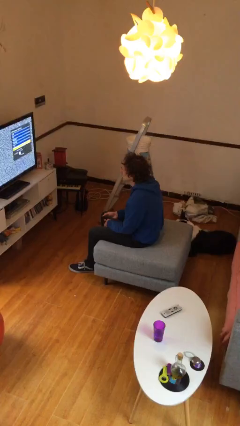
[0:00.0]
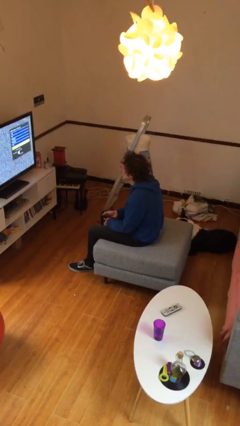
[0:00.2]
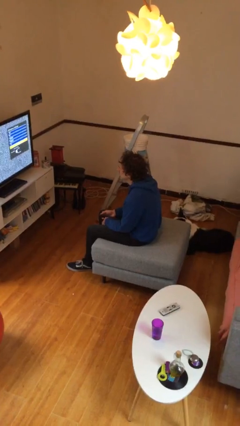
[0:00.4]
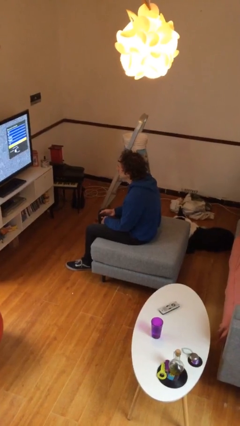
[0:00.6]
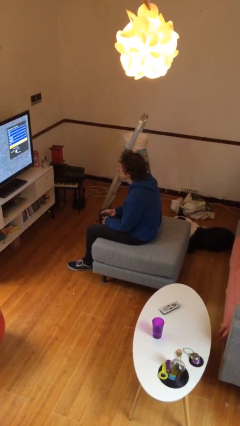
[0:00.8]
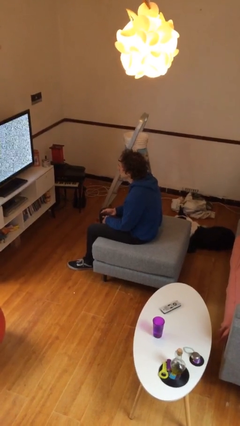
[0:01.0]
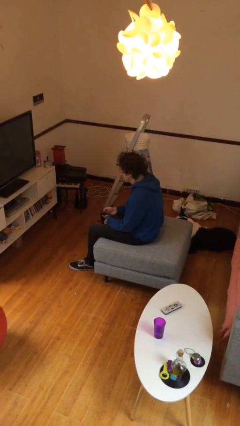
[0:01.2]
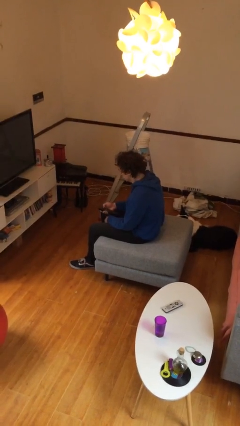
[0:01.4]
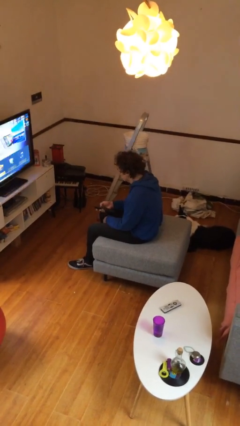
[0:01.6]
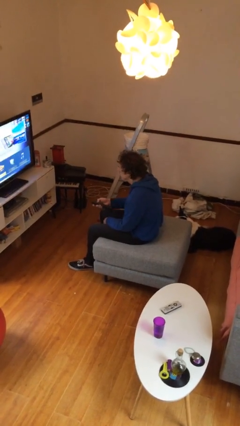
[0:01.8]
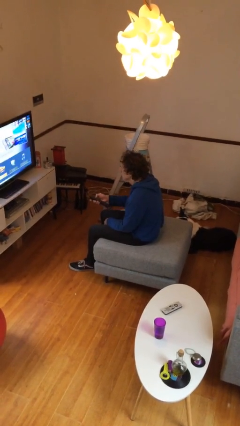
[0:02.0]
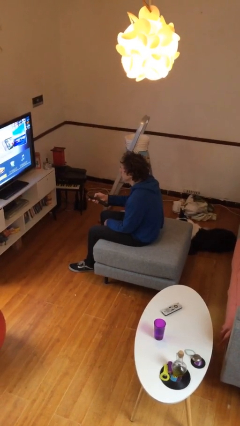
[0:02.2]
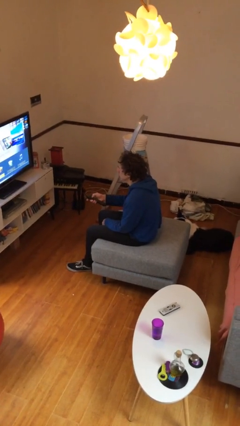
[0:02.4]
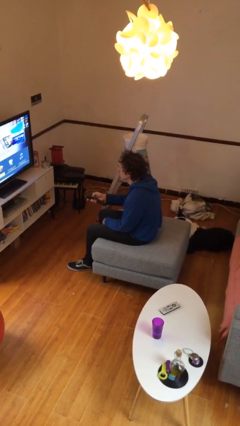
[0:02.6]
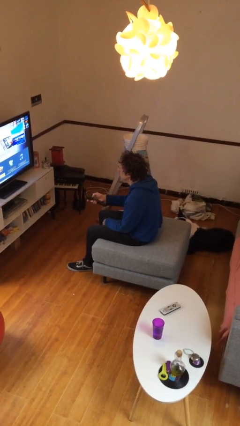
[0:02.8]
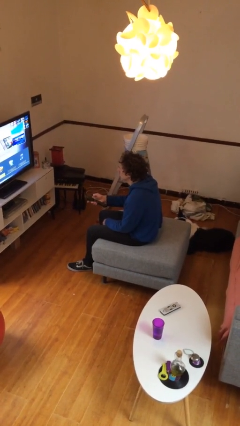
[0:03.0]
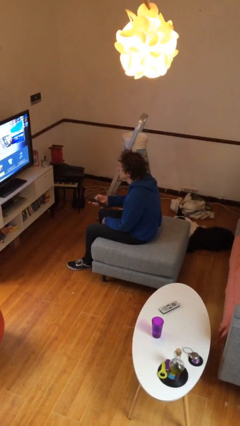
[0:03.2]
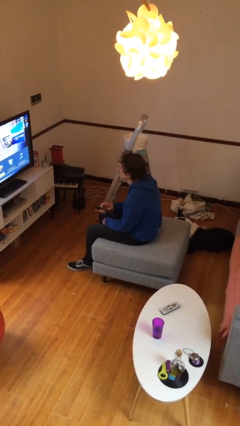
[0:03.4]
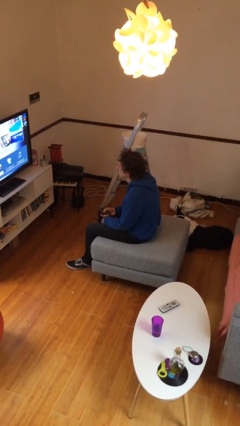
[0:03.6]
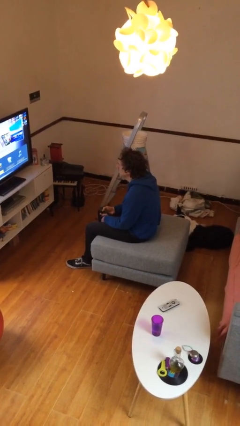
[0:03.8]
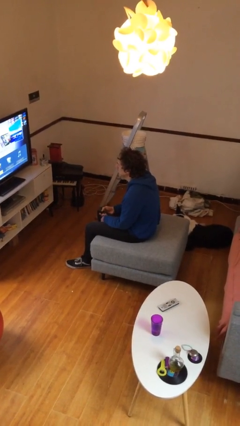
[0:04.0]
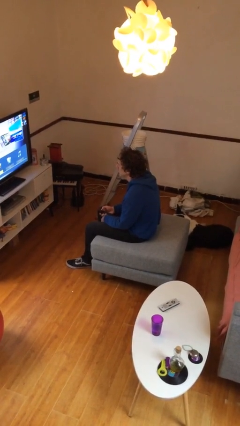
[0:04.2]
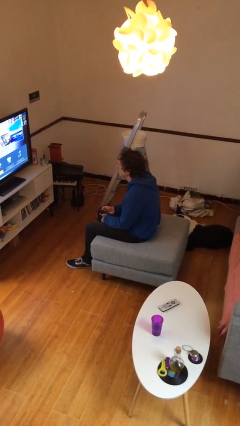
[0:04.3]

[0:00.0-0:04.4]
person uses television remote

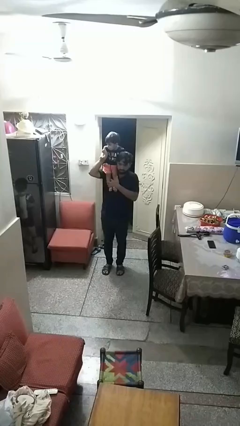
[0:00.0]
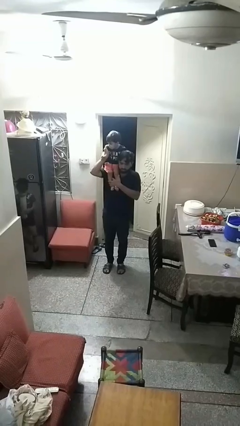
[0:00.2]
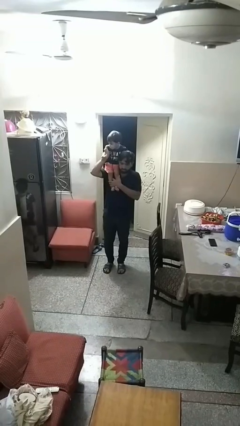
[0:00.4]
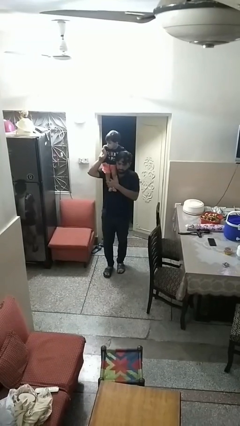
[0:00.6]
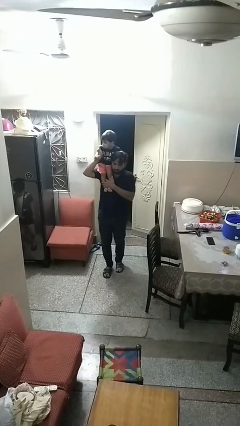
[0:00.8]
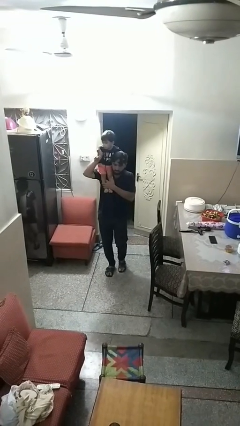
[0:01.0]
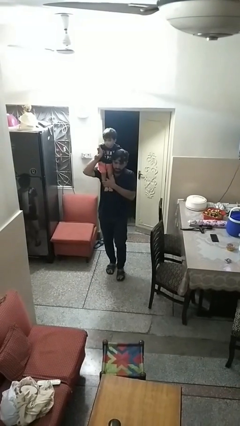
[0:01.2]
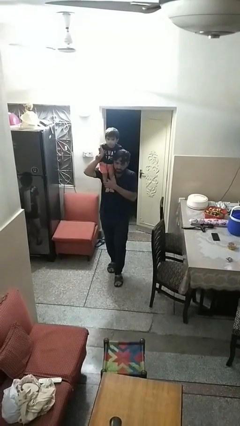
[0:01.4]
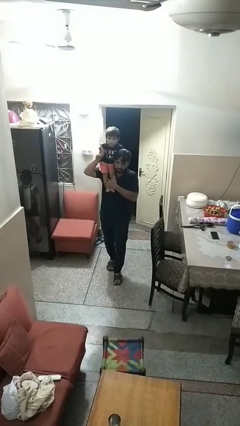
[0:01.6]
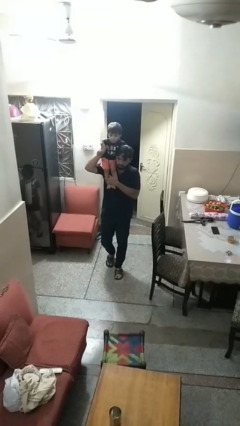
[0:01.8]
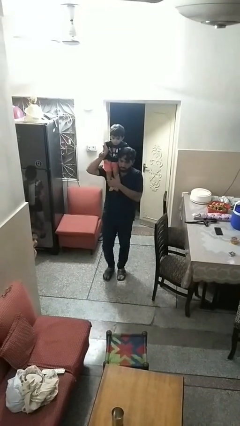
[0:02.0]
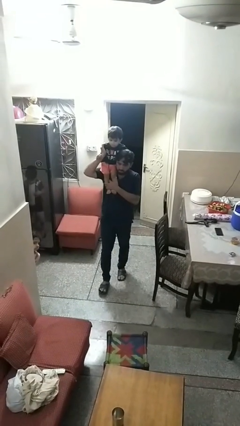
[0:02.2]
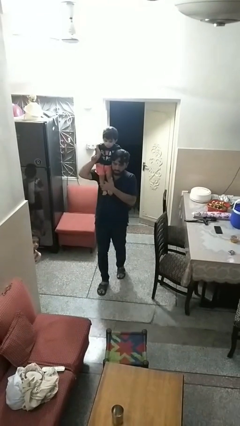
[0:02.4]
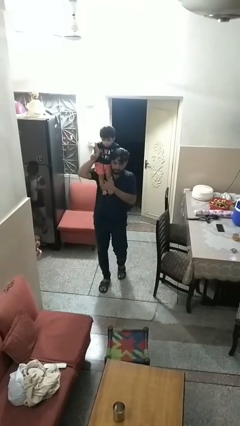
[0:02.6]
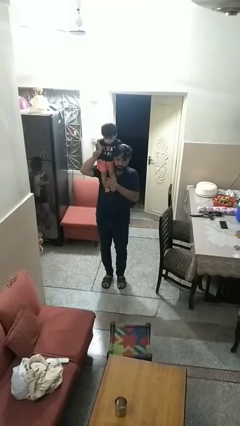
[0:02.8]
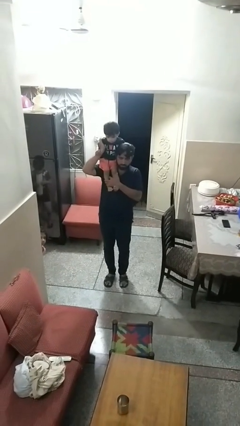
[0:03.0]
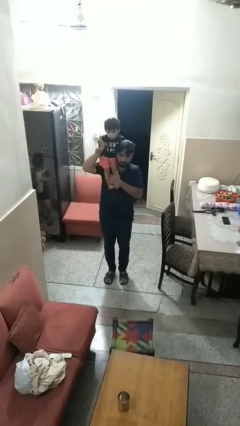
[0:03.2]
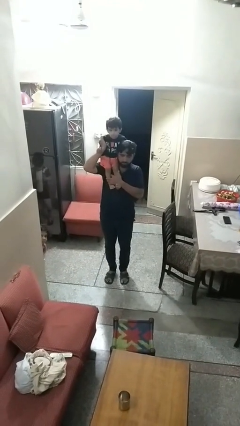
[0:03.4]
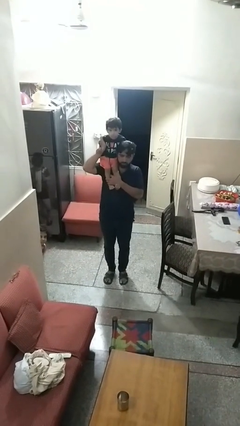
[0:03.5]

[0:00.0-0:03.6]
person carries person on shoulders

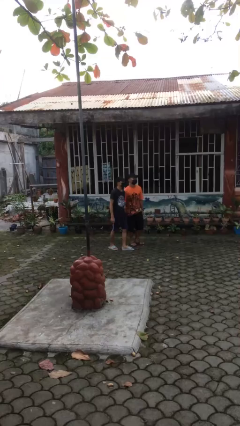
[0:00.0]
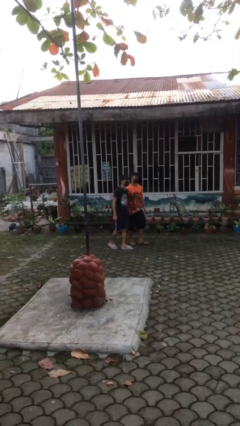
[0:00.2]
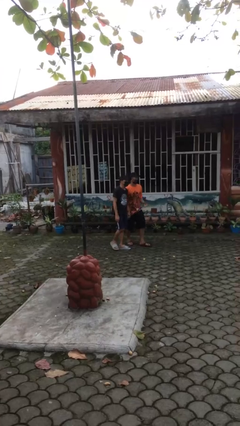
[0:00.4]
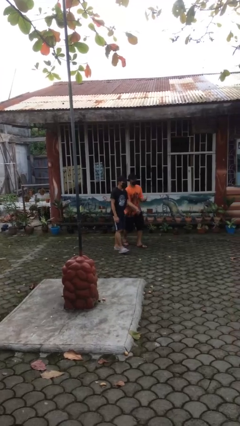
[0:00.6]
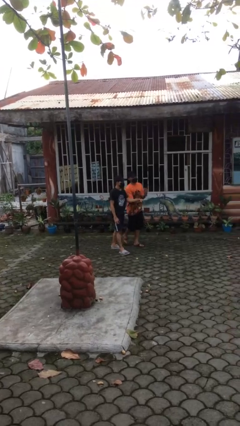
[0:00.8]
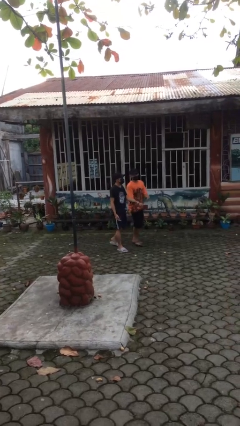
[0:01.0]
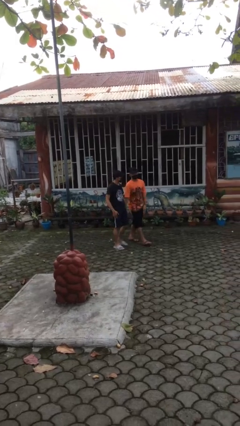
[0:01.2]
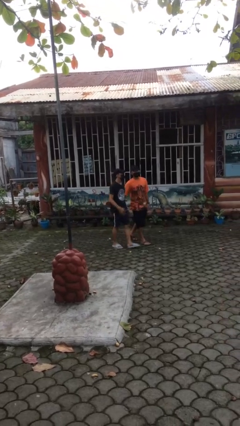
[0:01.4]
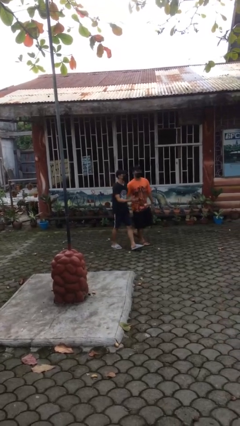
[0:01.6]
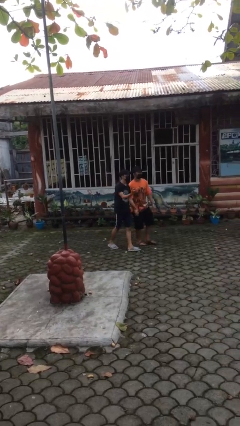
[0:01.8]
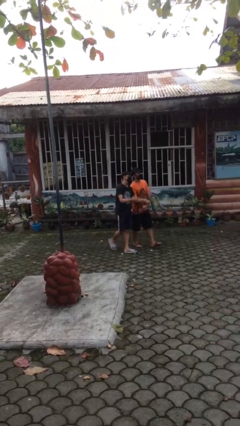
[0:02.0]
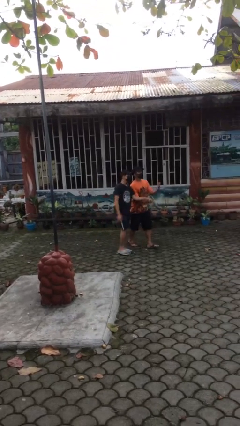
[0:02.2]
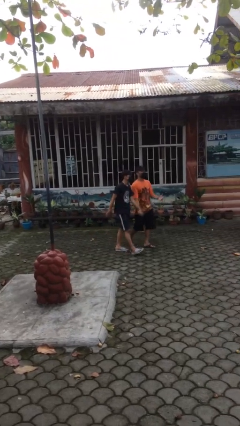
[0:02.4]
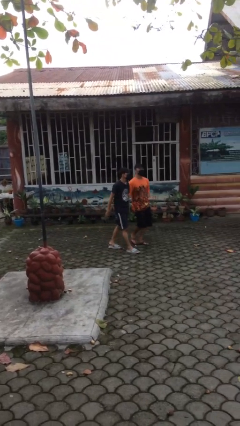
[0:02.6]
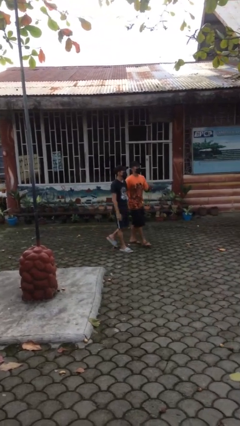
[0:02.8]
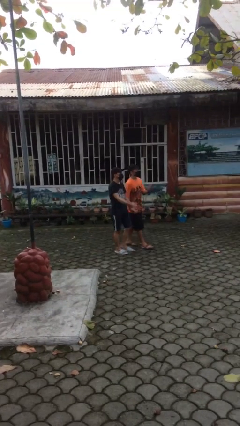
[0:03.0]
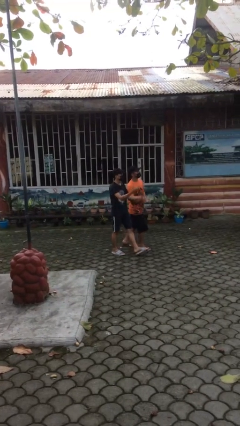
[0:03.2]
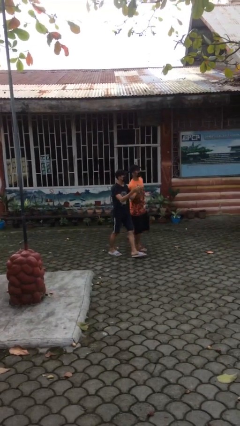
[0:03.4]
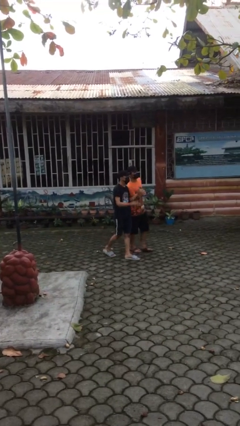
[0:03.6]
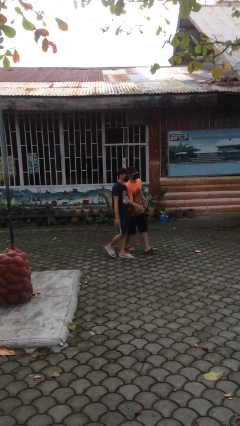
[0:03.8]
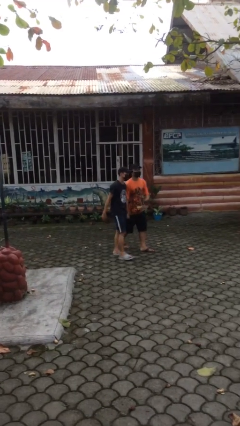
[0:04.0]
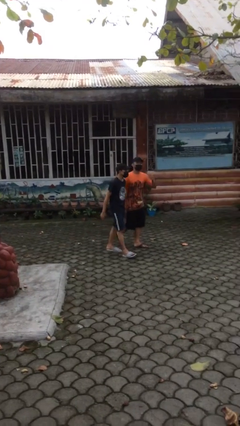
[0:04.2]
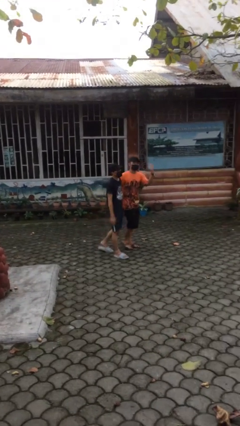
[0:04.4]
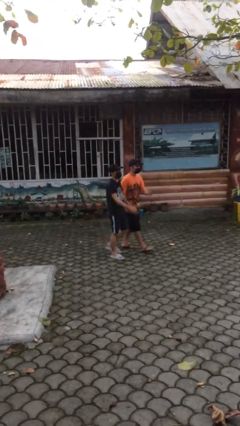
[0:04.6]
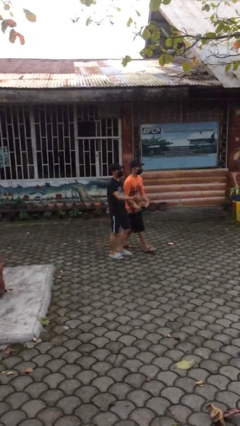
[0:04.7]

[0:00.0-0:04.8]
person holds hand

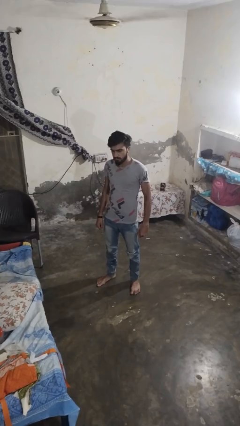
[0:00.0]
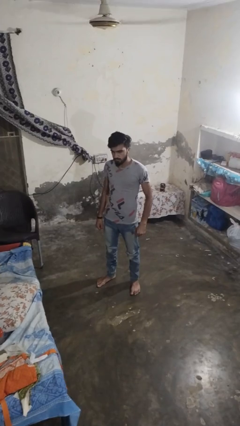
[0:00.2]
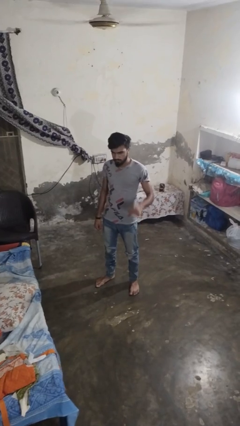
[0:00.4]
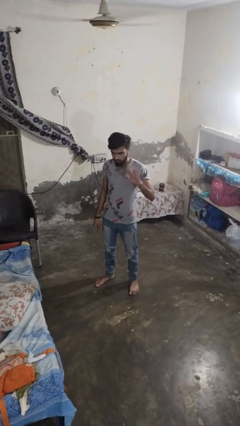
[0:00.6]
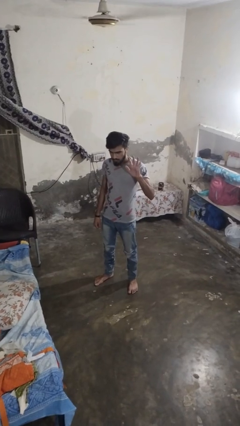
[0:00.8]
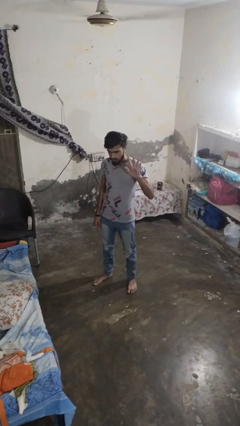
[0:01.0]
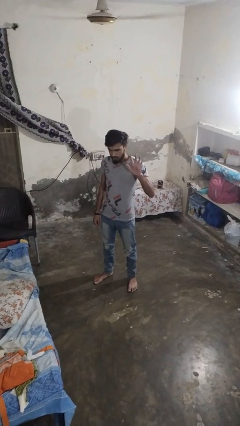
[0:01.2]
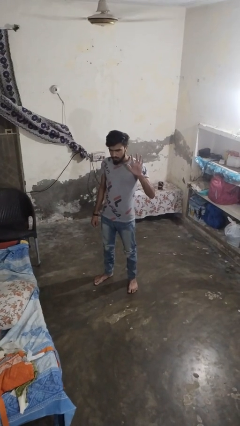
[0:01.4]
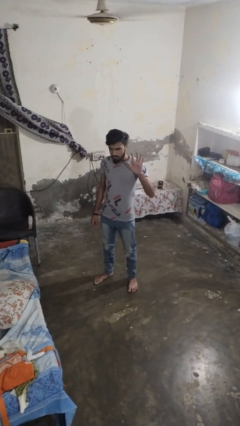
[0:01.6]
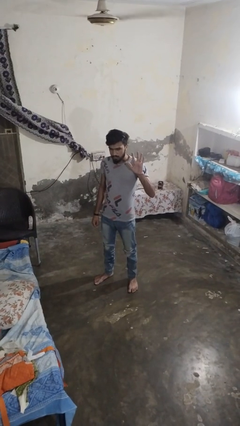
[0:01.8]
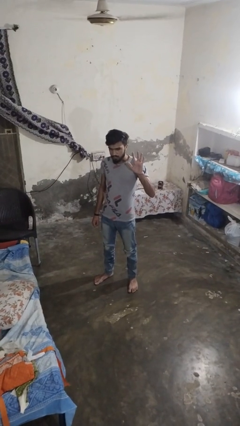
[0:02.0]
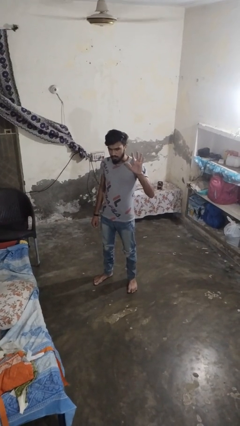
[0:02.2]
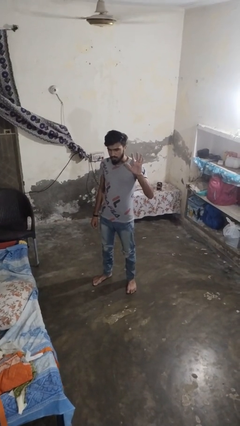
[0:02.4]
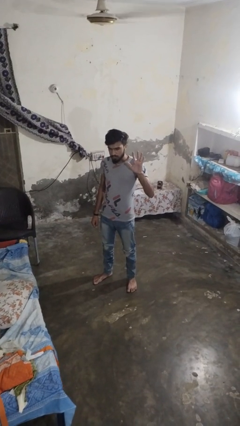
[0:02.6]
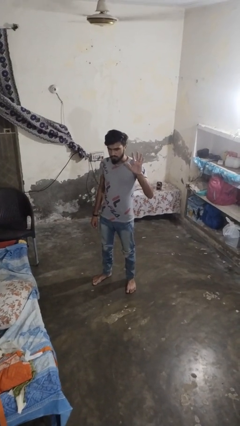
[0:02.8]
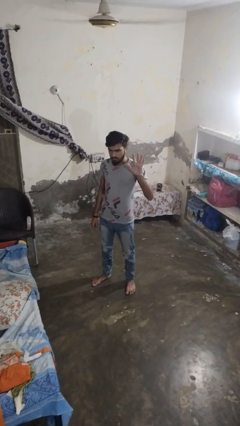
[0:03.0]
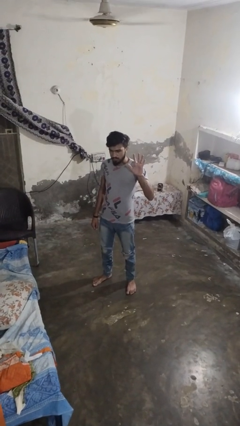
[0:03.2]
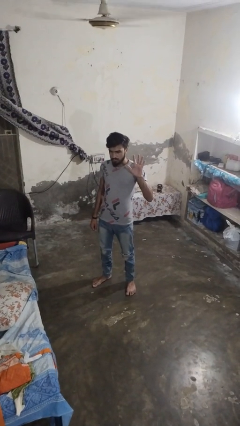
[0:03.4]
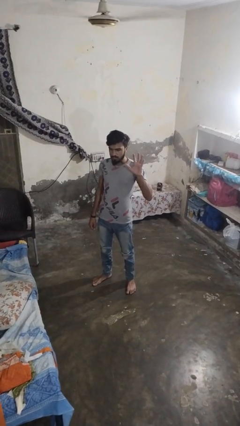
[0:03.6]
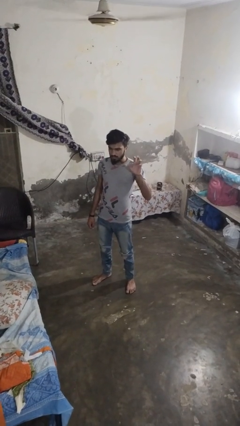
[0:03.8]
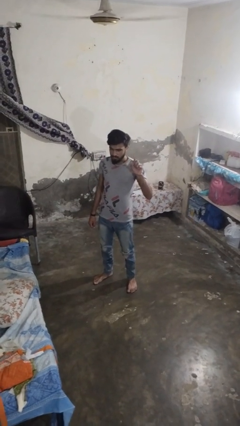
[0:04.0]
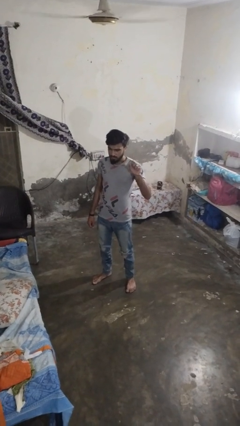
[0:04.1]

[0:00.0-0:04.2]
person gestures number five

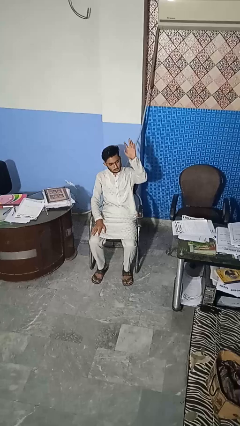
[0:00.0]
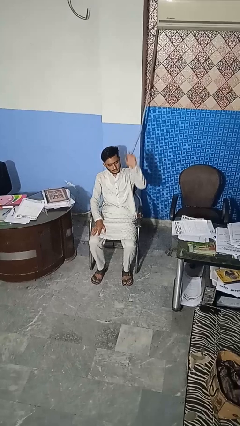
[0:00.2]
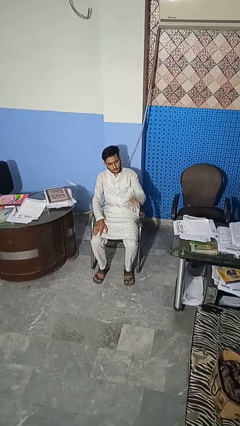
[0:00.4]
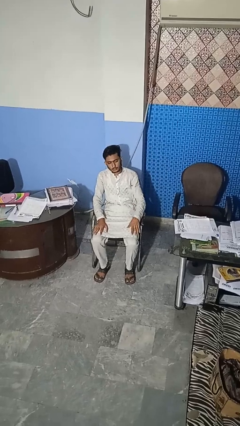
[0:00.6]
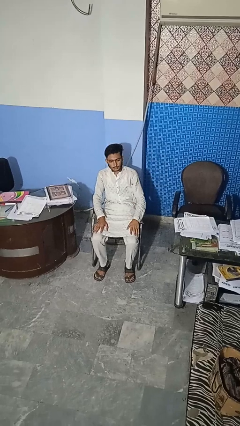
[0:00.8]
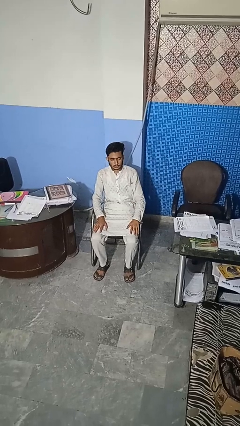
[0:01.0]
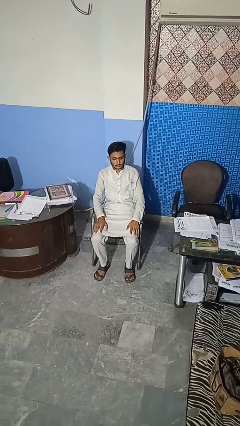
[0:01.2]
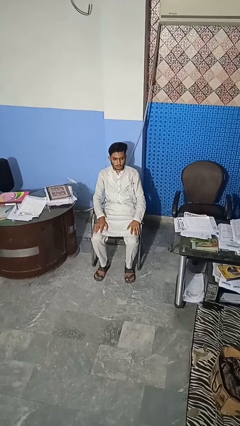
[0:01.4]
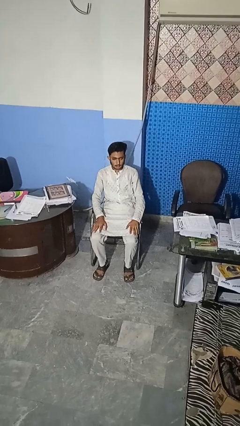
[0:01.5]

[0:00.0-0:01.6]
person gestures lower hand
